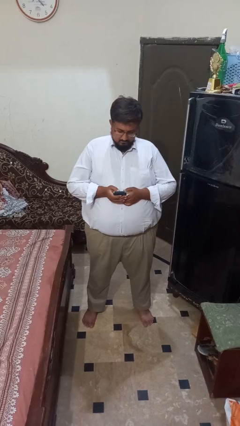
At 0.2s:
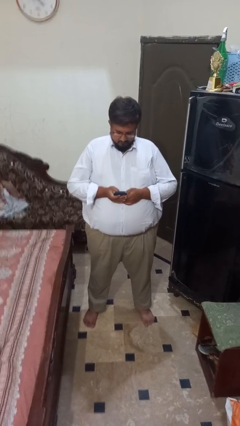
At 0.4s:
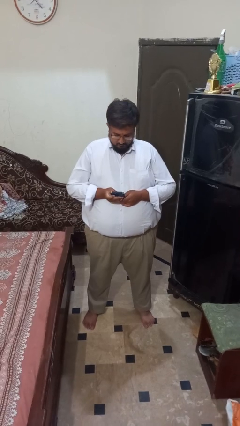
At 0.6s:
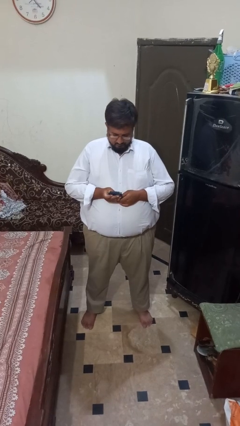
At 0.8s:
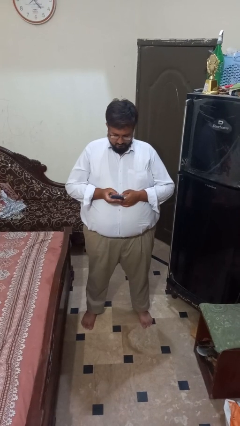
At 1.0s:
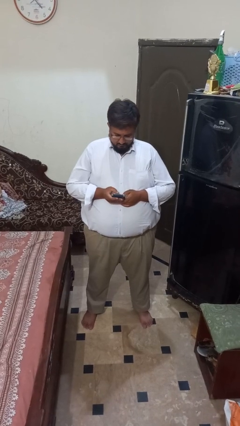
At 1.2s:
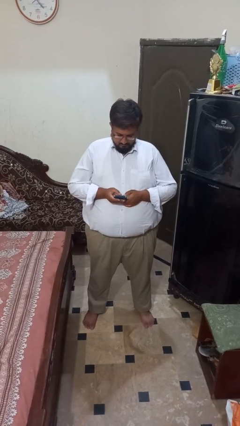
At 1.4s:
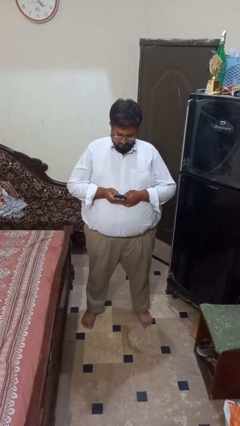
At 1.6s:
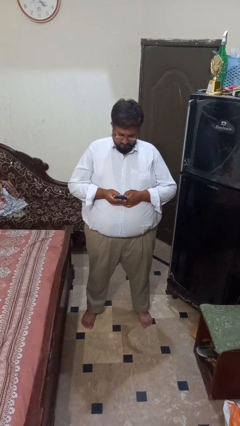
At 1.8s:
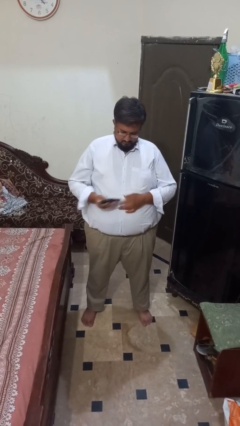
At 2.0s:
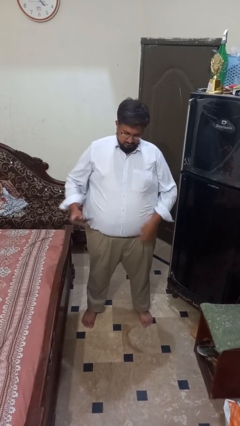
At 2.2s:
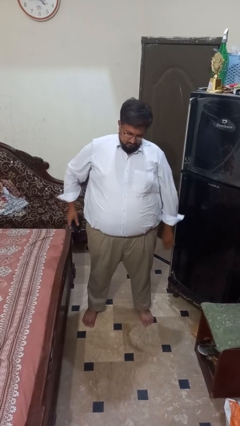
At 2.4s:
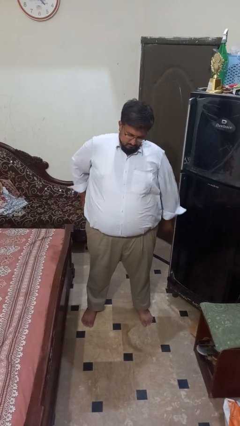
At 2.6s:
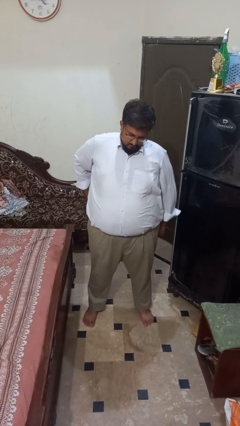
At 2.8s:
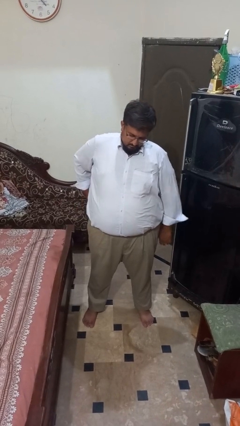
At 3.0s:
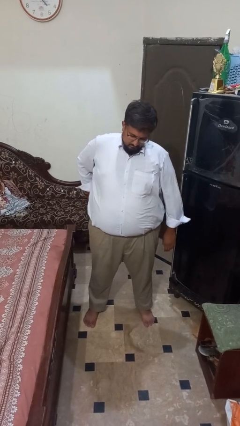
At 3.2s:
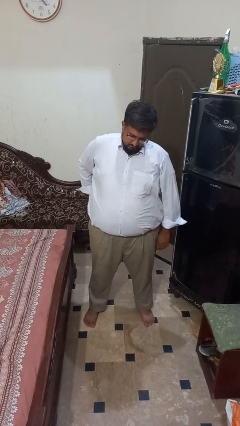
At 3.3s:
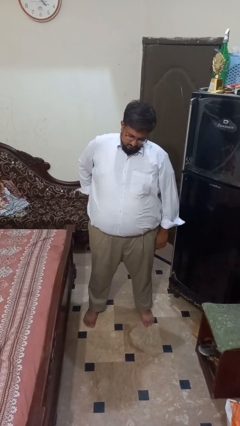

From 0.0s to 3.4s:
person puts phone into pocket

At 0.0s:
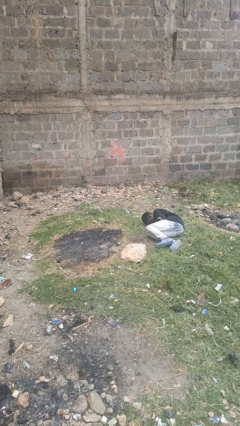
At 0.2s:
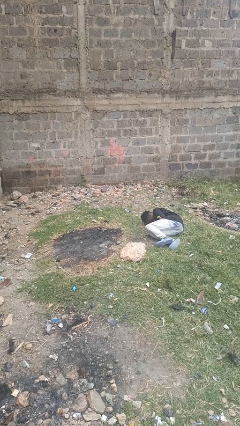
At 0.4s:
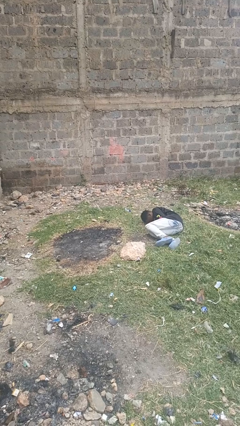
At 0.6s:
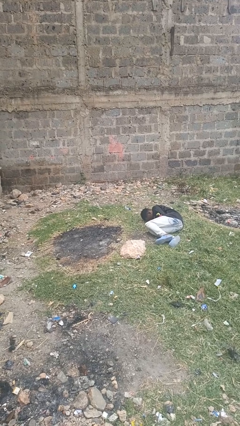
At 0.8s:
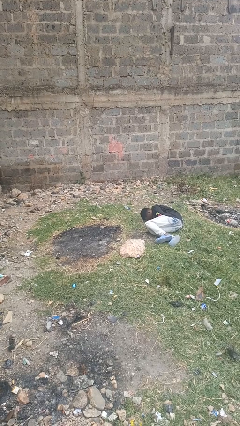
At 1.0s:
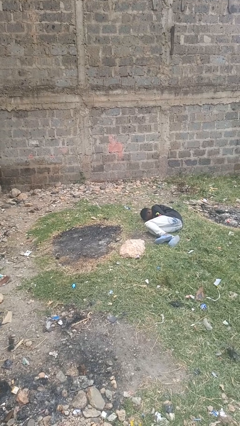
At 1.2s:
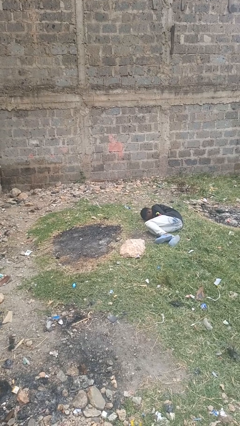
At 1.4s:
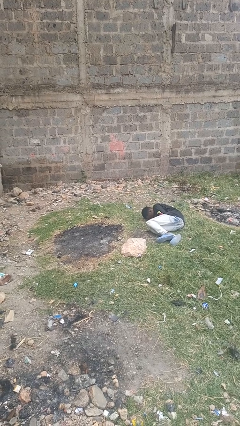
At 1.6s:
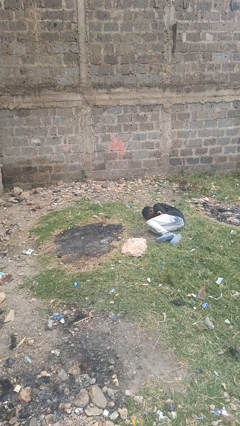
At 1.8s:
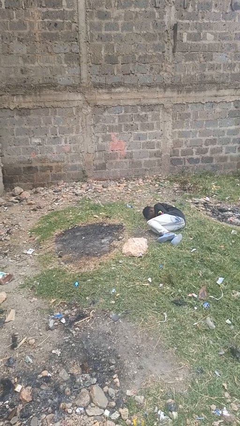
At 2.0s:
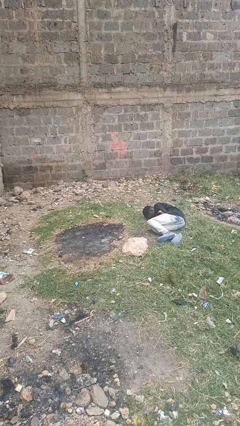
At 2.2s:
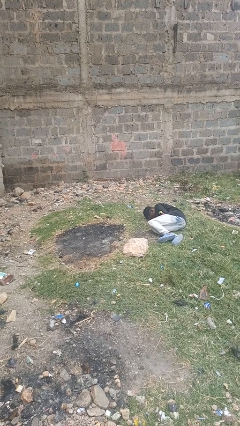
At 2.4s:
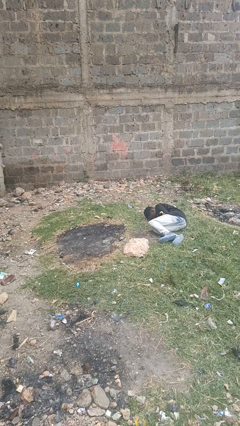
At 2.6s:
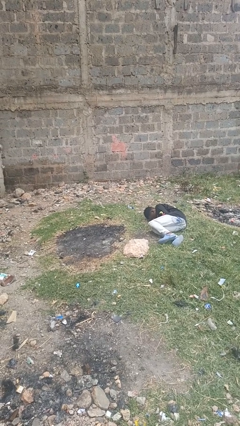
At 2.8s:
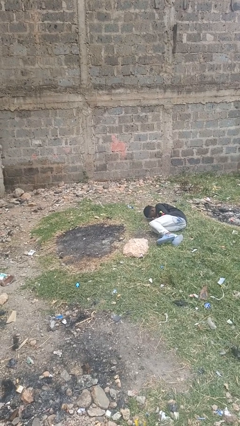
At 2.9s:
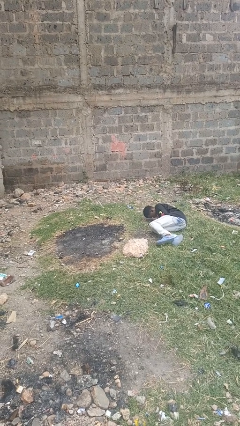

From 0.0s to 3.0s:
person lies down on floor

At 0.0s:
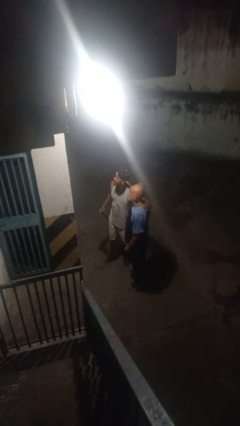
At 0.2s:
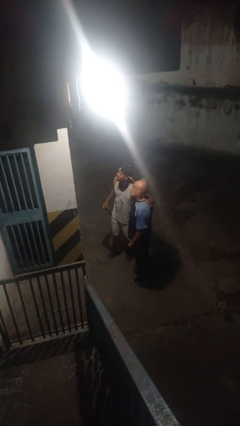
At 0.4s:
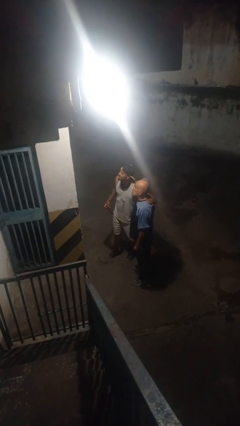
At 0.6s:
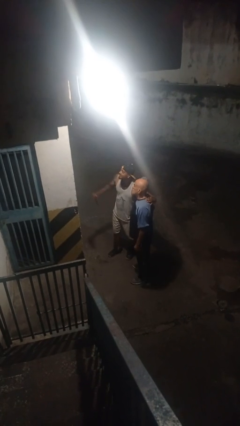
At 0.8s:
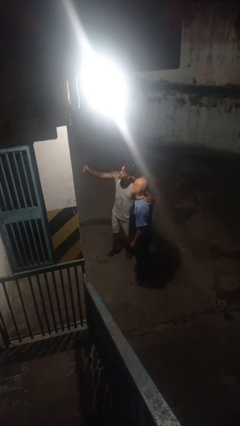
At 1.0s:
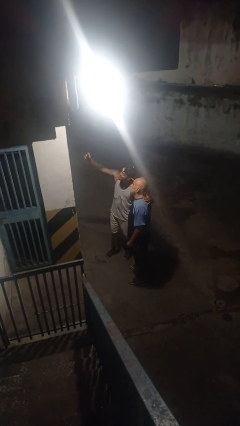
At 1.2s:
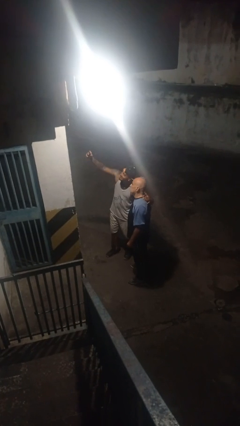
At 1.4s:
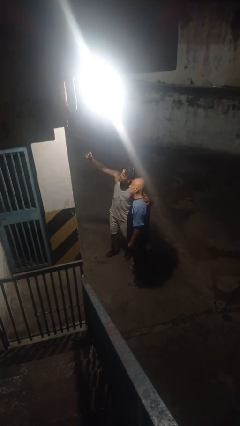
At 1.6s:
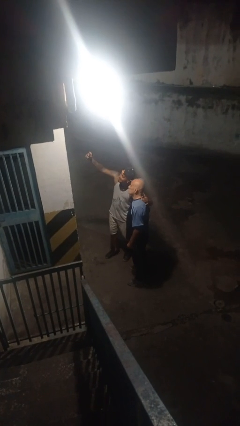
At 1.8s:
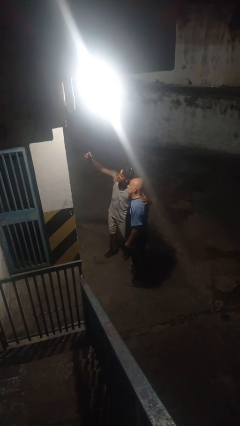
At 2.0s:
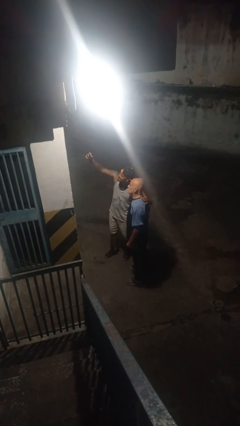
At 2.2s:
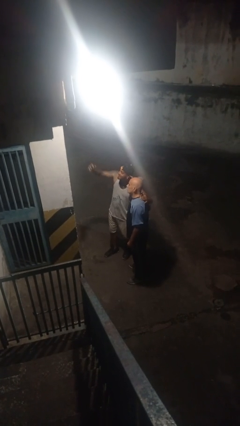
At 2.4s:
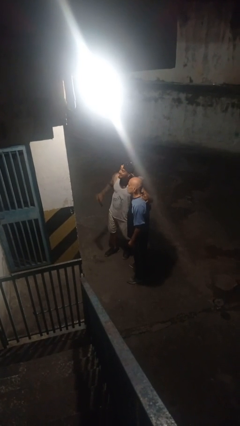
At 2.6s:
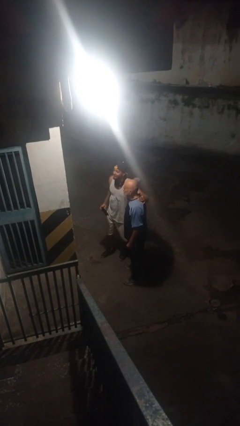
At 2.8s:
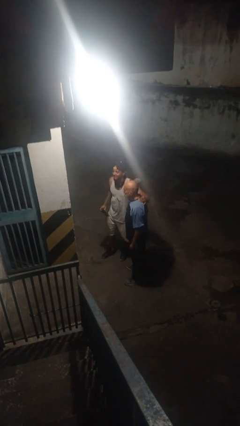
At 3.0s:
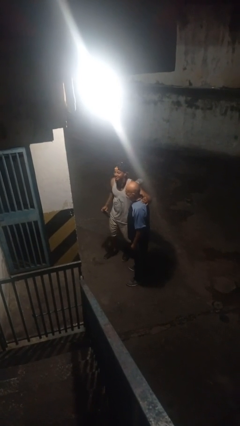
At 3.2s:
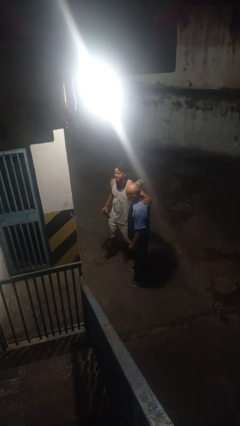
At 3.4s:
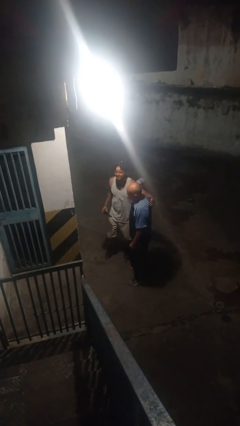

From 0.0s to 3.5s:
person takes selfie with person

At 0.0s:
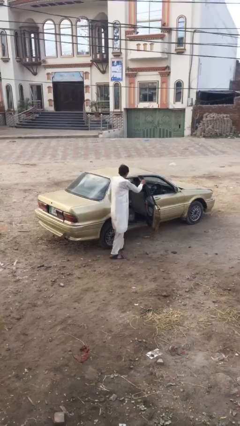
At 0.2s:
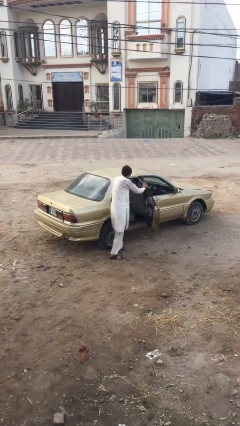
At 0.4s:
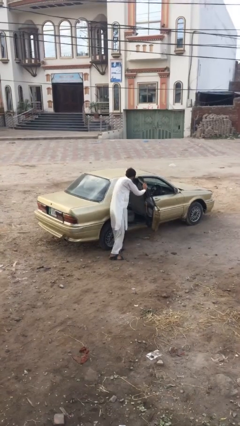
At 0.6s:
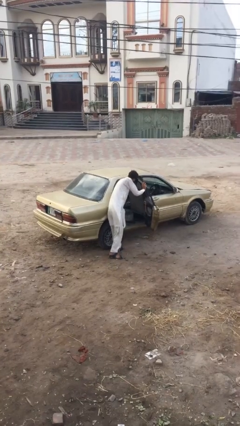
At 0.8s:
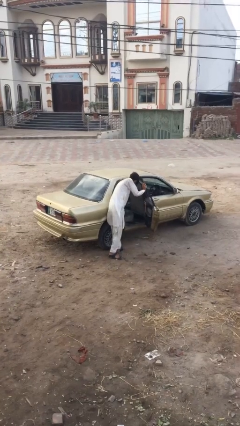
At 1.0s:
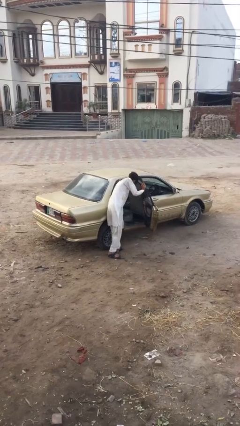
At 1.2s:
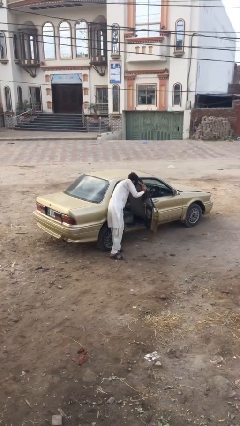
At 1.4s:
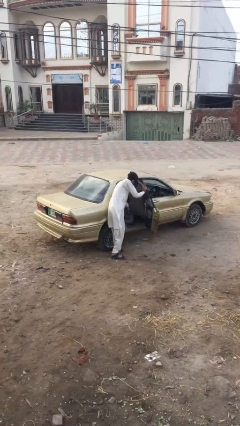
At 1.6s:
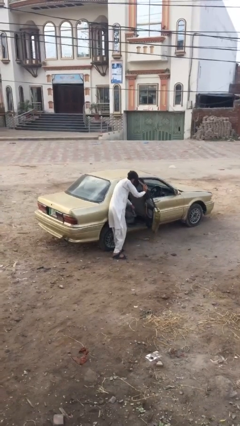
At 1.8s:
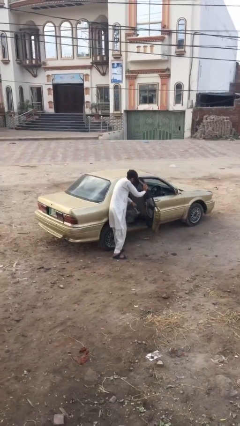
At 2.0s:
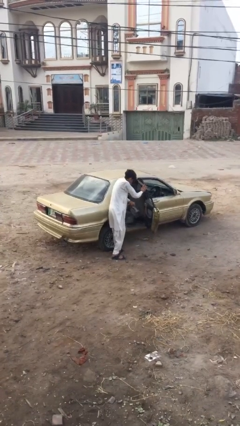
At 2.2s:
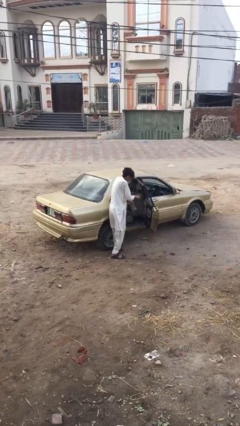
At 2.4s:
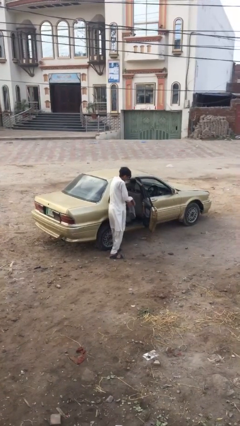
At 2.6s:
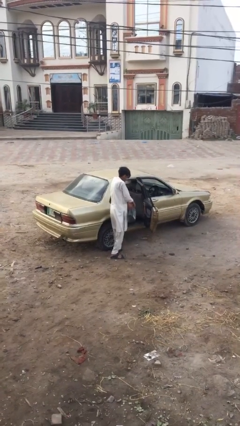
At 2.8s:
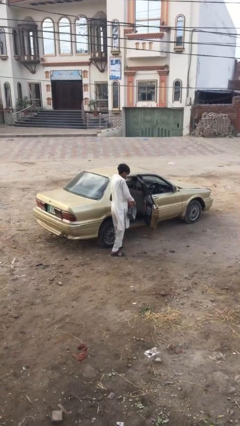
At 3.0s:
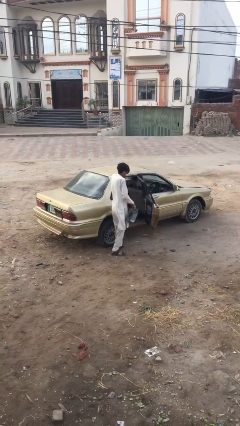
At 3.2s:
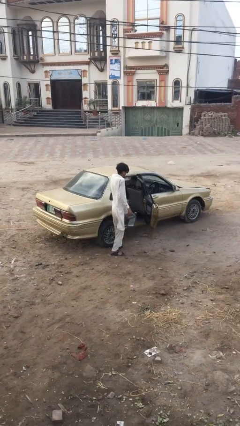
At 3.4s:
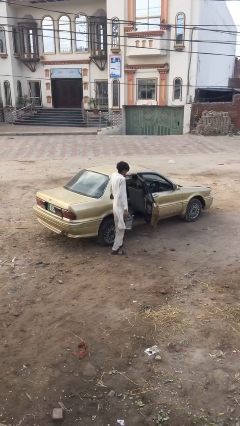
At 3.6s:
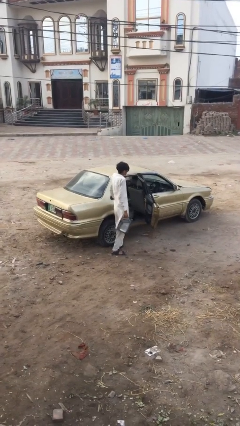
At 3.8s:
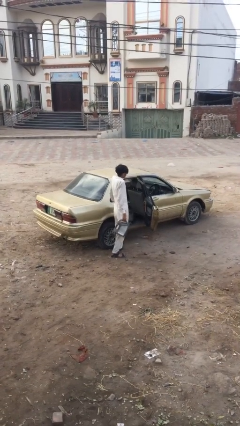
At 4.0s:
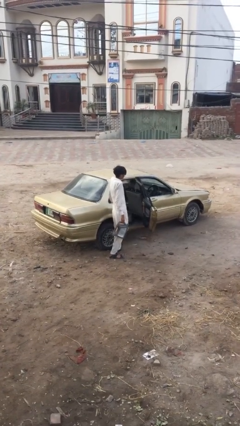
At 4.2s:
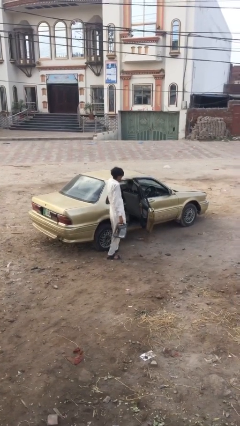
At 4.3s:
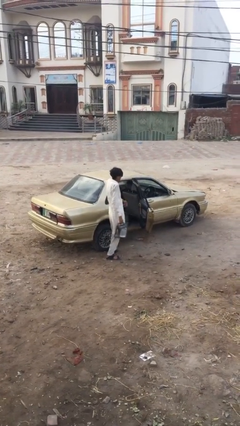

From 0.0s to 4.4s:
person unloads car

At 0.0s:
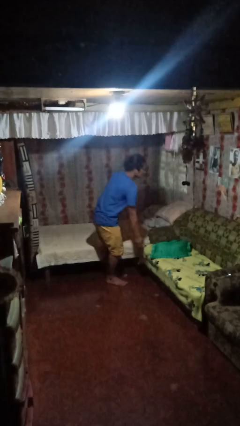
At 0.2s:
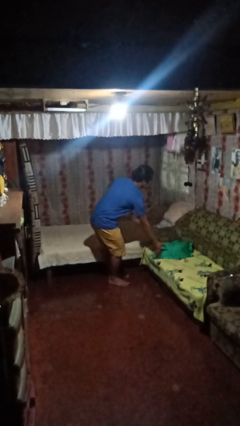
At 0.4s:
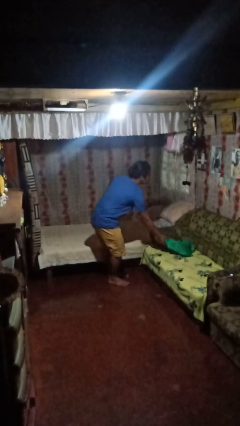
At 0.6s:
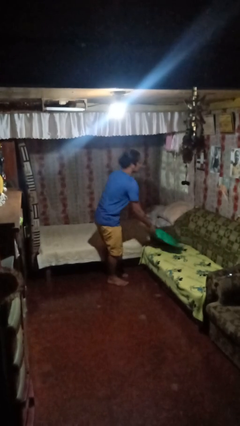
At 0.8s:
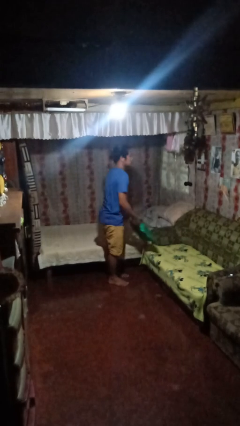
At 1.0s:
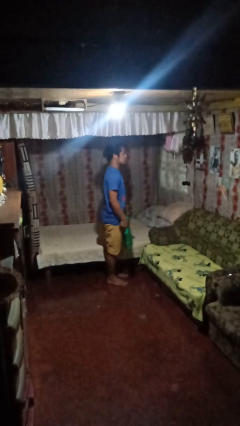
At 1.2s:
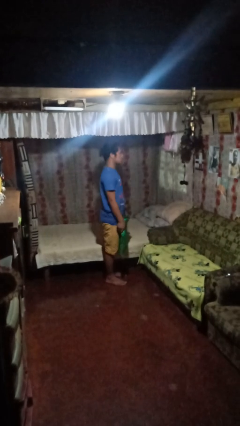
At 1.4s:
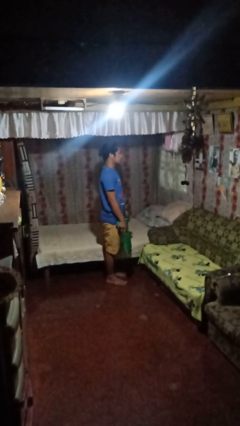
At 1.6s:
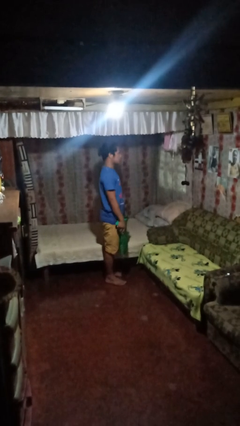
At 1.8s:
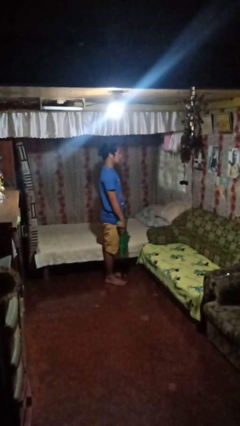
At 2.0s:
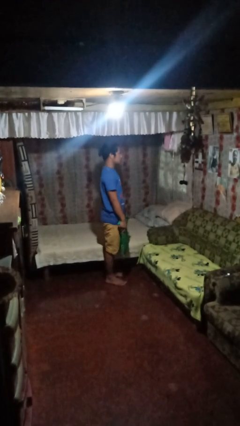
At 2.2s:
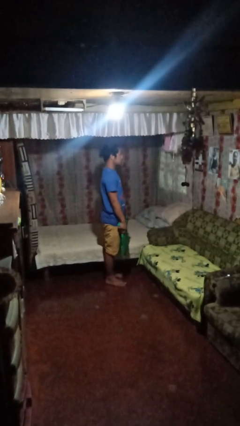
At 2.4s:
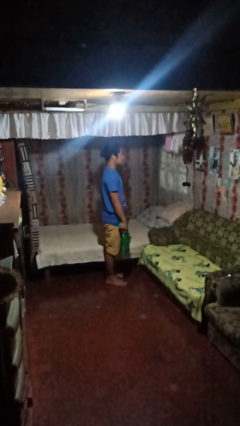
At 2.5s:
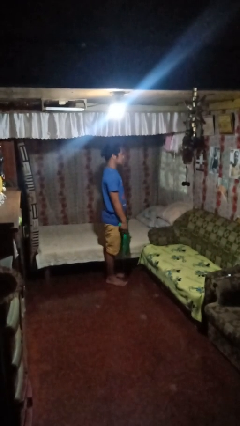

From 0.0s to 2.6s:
person picks up object from couch

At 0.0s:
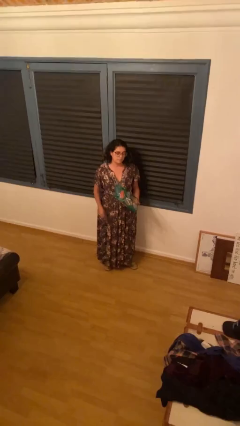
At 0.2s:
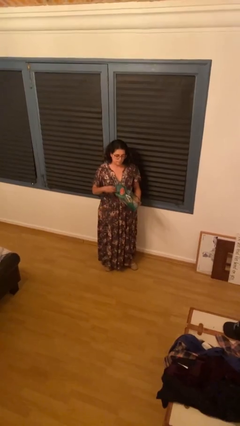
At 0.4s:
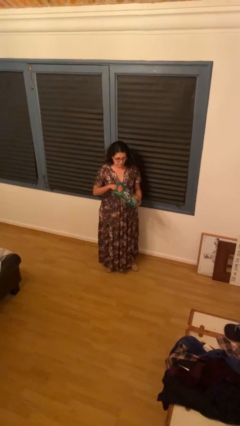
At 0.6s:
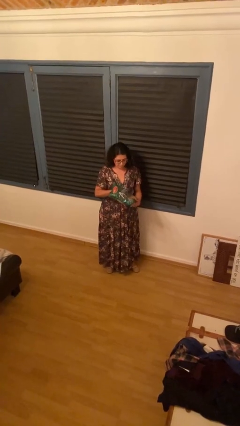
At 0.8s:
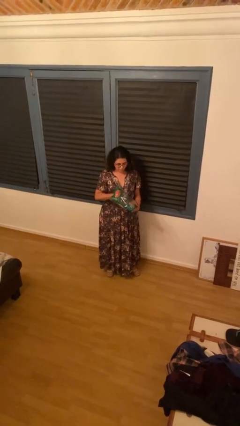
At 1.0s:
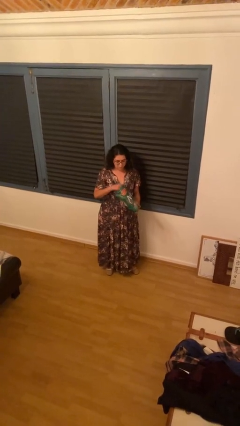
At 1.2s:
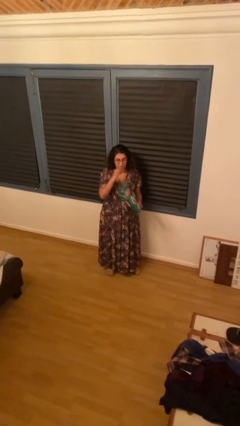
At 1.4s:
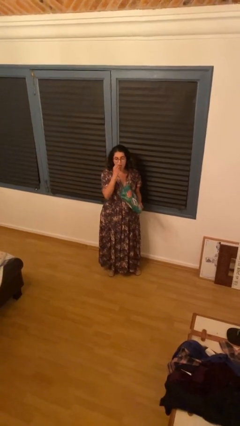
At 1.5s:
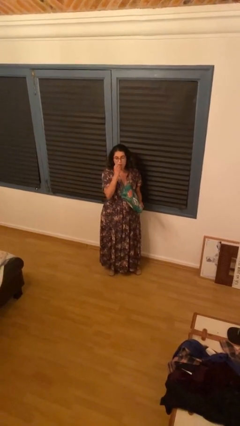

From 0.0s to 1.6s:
person eats snack from bag
